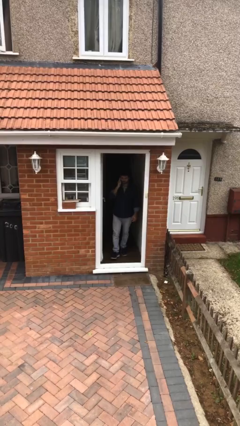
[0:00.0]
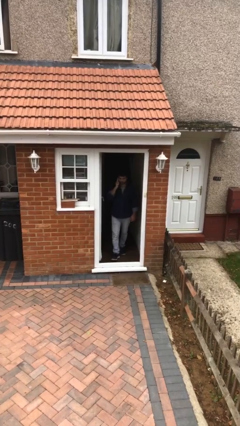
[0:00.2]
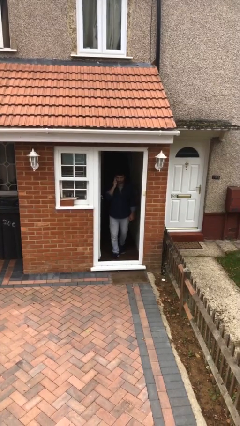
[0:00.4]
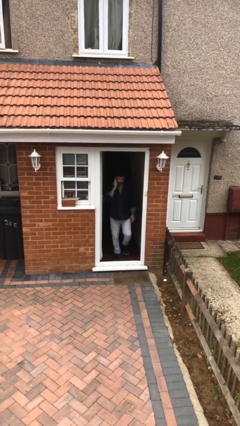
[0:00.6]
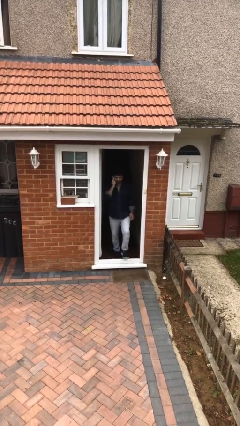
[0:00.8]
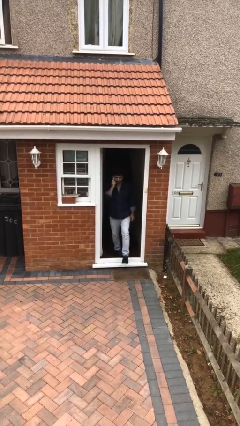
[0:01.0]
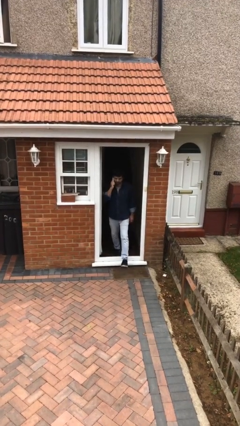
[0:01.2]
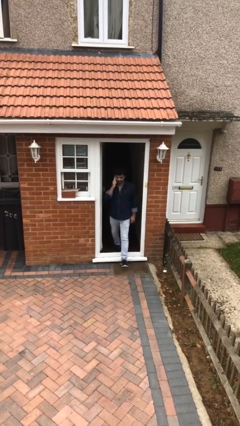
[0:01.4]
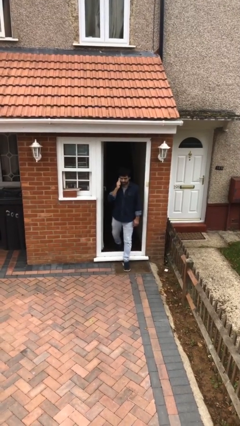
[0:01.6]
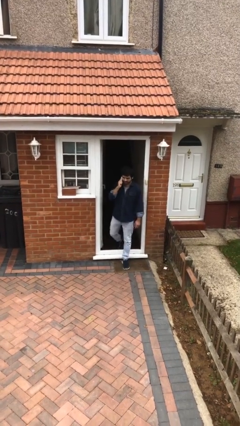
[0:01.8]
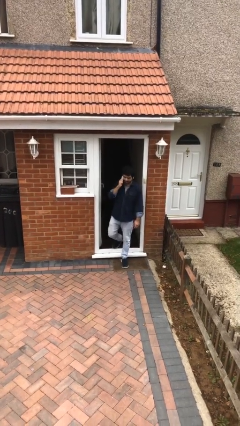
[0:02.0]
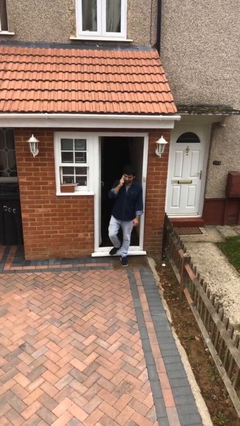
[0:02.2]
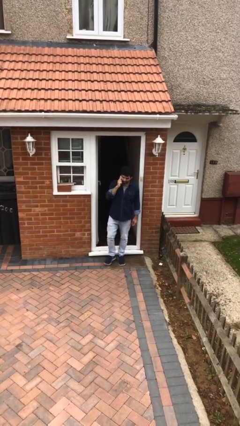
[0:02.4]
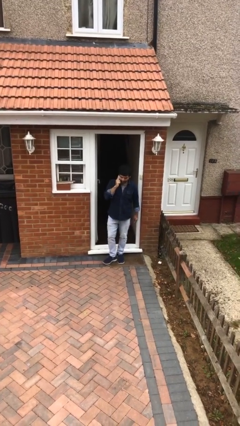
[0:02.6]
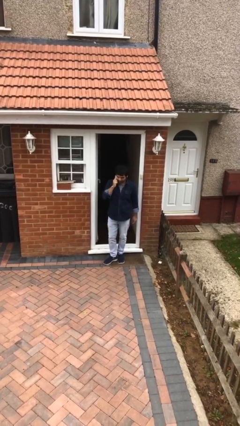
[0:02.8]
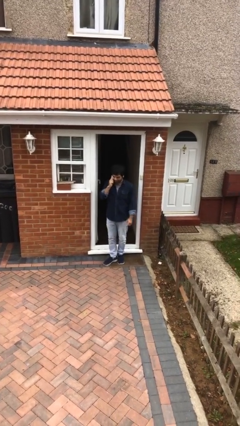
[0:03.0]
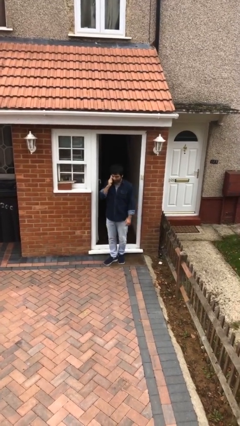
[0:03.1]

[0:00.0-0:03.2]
person enters scene through structure

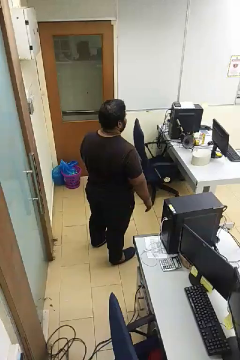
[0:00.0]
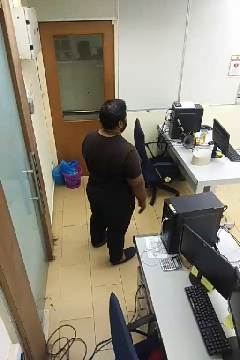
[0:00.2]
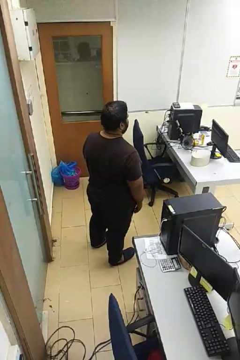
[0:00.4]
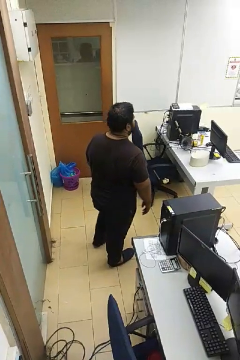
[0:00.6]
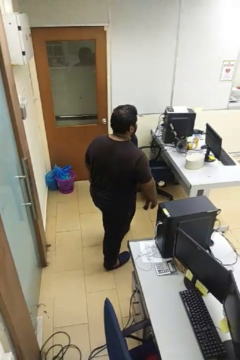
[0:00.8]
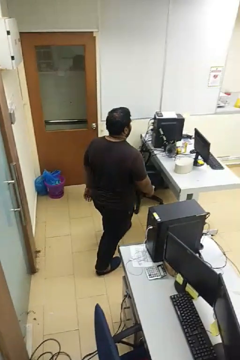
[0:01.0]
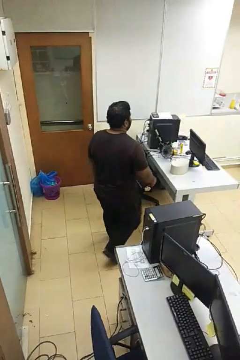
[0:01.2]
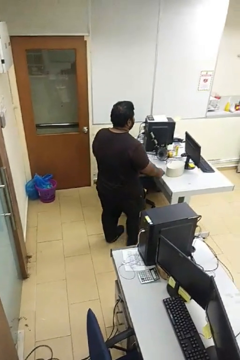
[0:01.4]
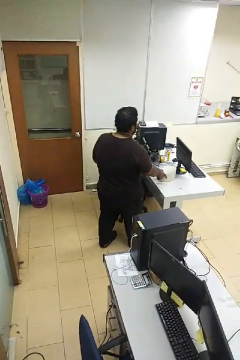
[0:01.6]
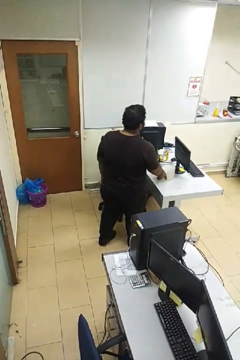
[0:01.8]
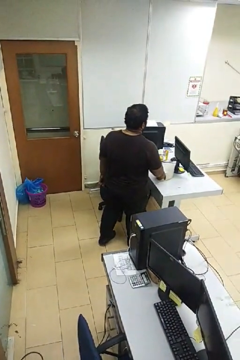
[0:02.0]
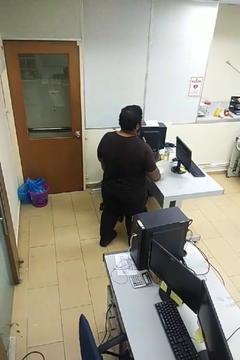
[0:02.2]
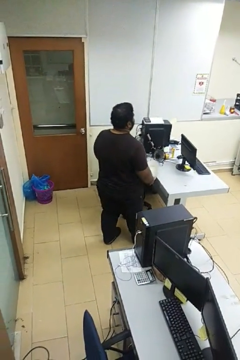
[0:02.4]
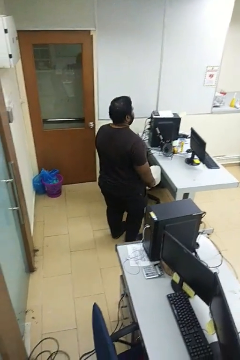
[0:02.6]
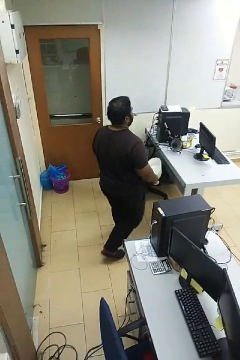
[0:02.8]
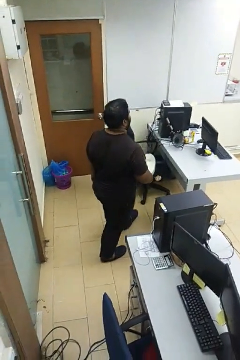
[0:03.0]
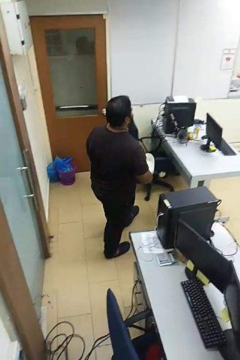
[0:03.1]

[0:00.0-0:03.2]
person picks up object from table

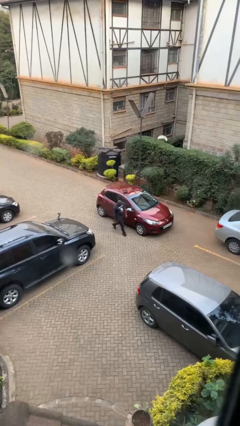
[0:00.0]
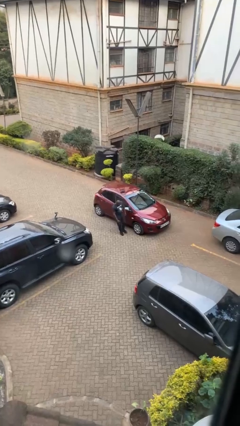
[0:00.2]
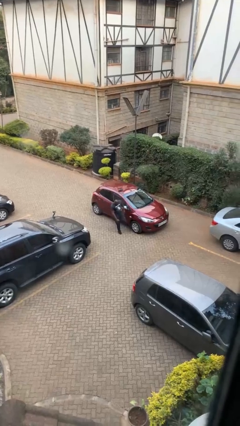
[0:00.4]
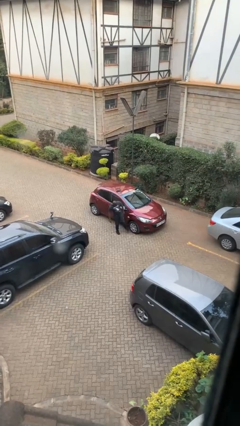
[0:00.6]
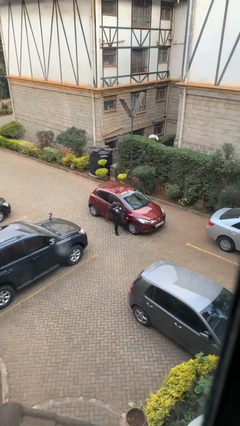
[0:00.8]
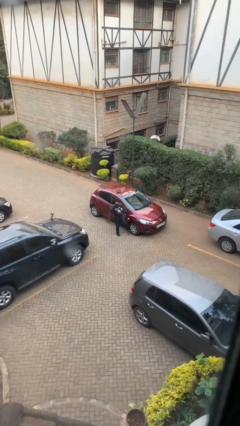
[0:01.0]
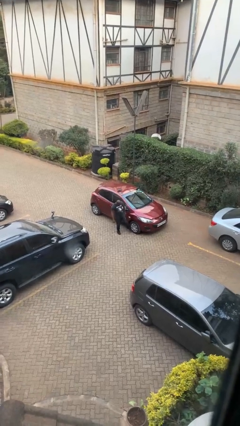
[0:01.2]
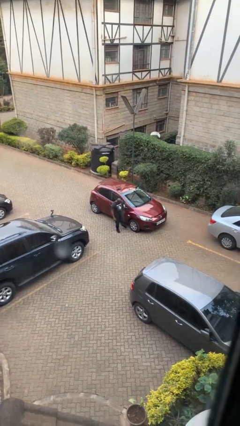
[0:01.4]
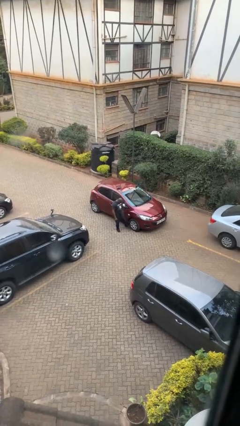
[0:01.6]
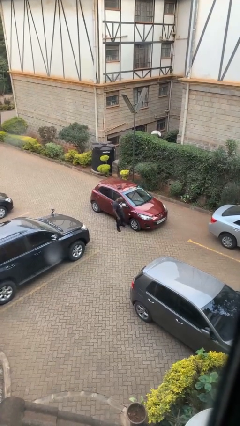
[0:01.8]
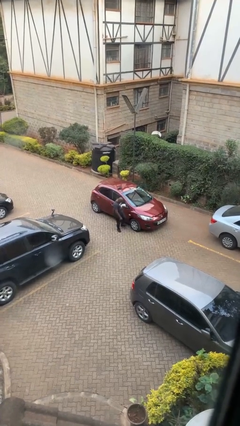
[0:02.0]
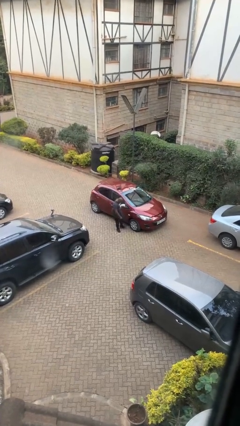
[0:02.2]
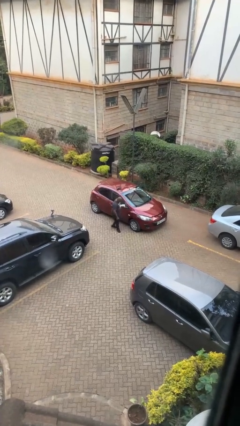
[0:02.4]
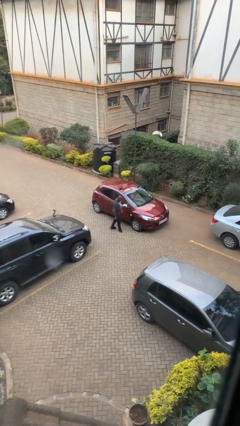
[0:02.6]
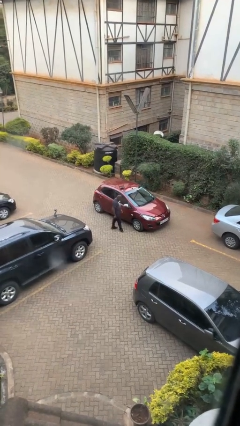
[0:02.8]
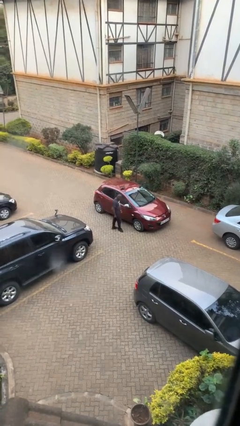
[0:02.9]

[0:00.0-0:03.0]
person kicks car tires

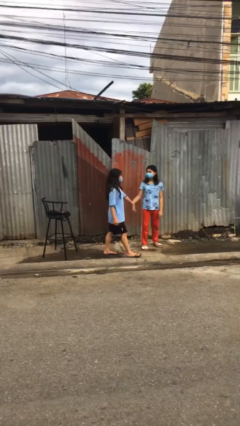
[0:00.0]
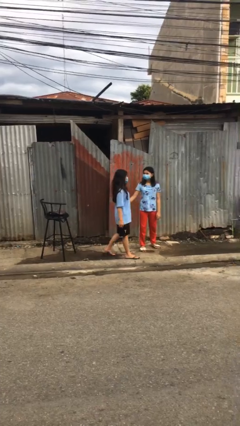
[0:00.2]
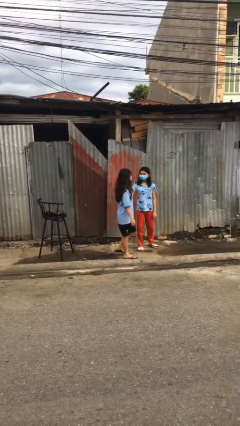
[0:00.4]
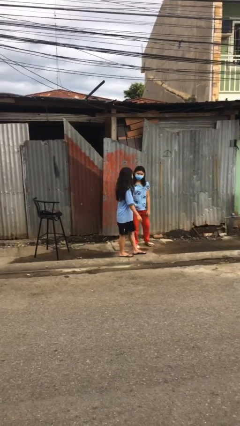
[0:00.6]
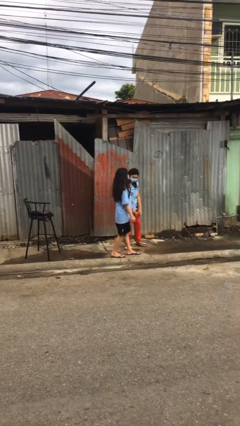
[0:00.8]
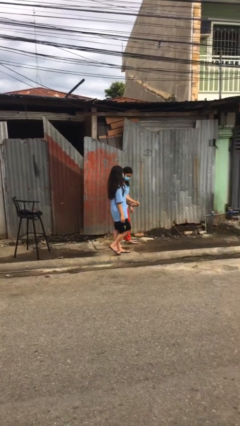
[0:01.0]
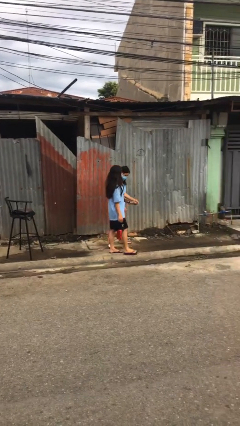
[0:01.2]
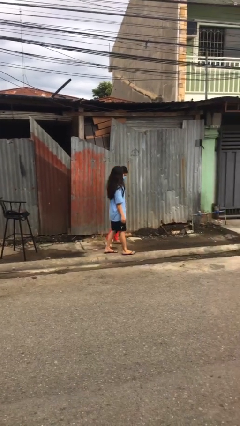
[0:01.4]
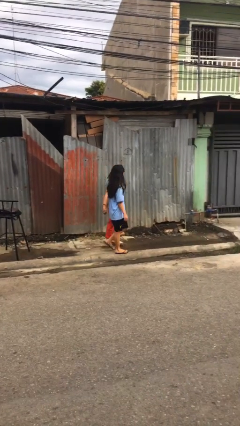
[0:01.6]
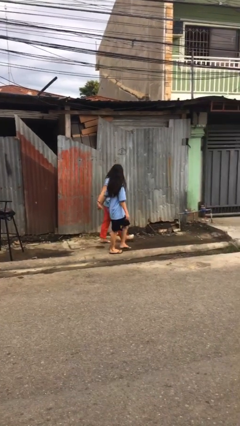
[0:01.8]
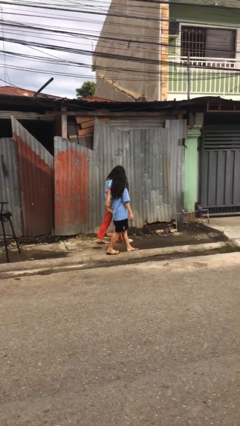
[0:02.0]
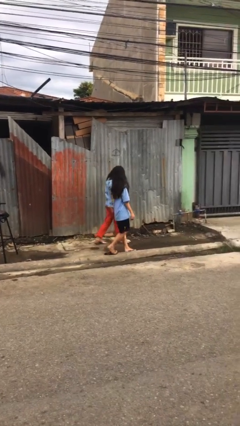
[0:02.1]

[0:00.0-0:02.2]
person holds hand

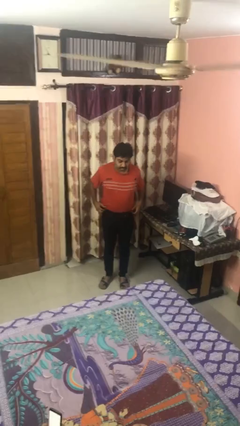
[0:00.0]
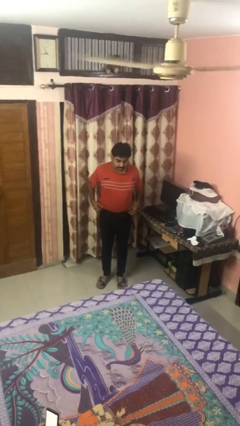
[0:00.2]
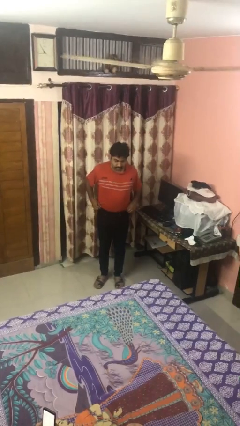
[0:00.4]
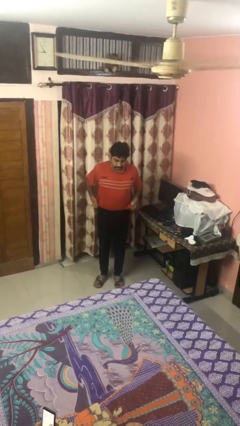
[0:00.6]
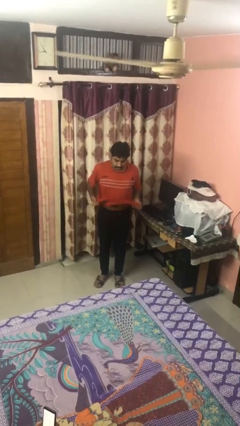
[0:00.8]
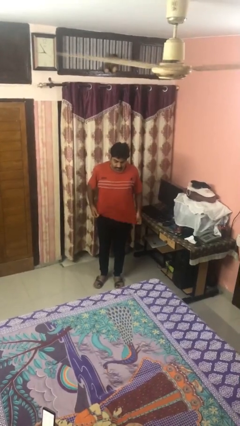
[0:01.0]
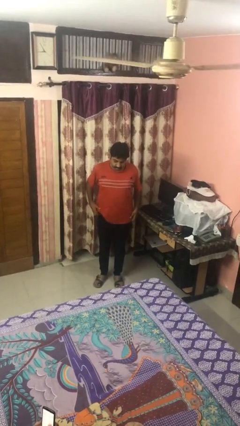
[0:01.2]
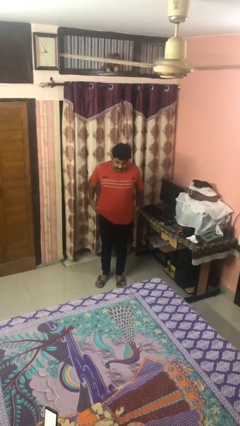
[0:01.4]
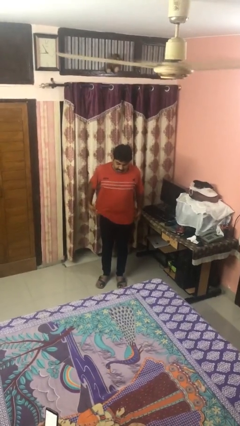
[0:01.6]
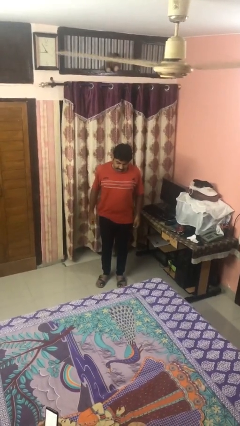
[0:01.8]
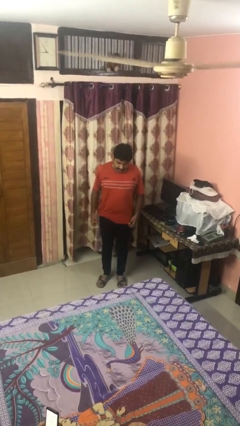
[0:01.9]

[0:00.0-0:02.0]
person untucks shirt

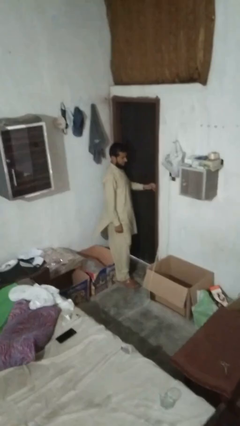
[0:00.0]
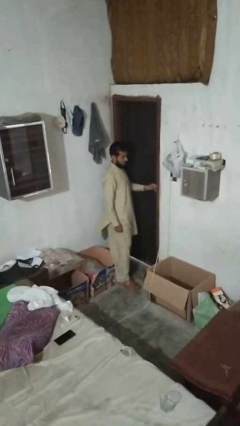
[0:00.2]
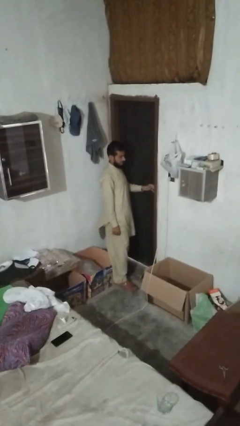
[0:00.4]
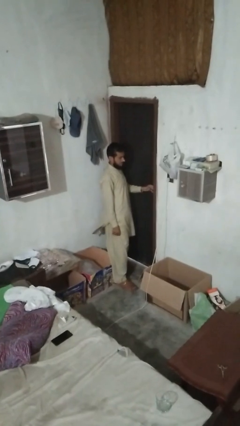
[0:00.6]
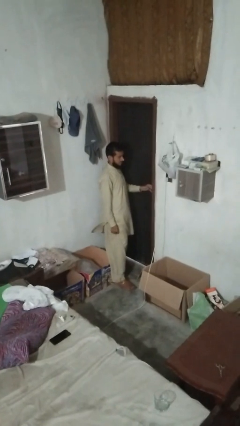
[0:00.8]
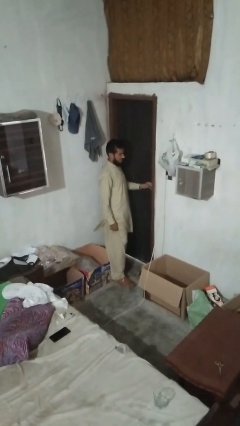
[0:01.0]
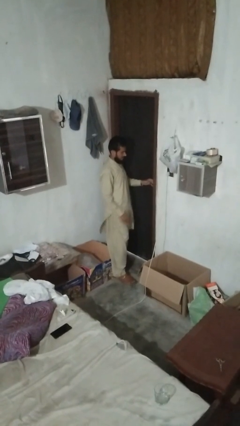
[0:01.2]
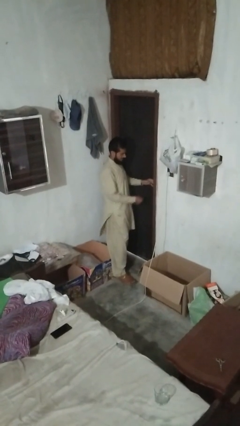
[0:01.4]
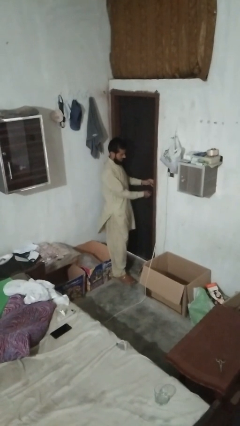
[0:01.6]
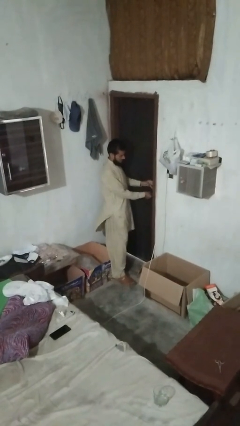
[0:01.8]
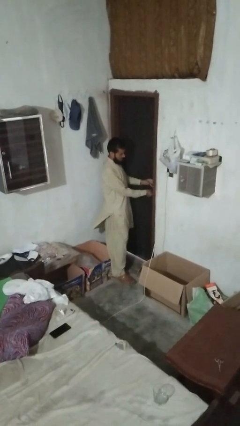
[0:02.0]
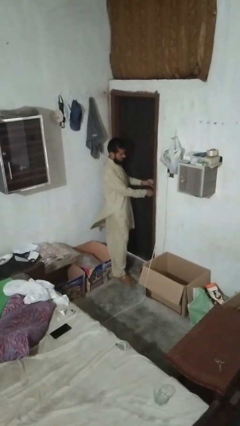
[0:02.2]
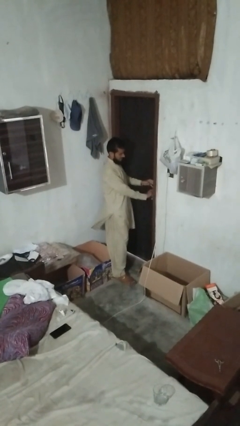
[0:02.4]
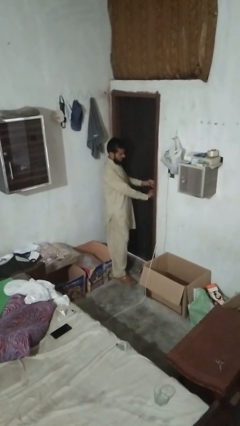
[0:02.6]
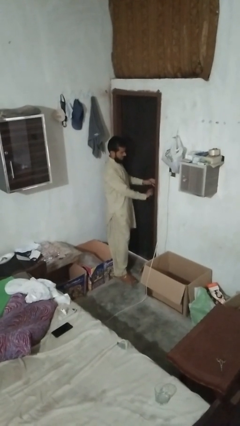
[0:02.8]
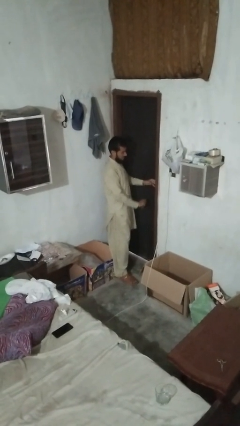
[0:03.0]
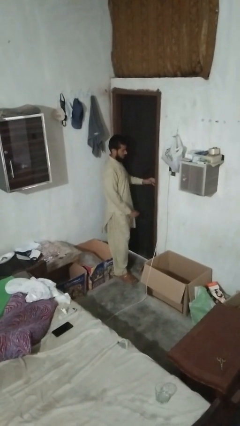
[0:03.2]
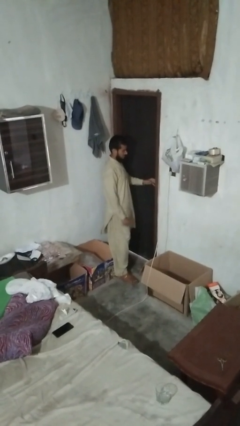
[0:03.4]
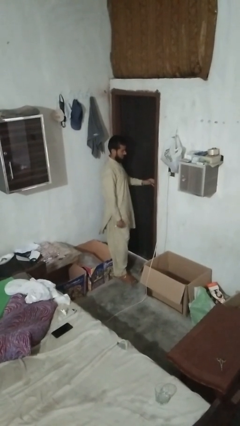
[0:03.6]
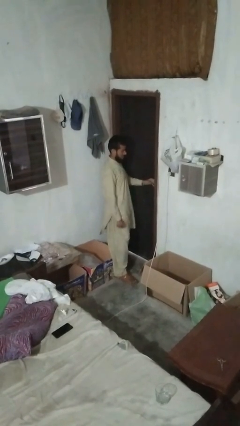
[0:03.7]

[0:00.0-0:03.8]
person unlocks door with keys

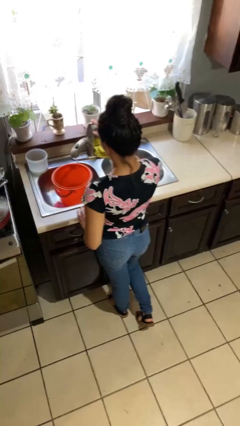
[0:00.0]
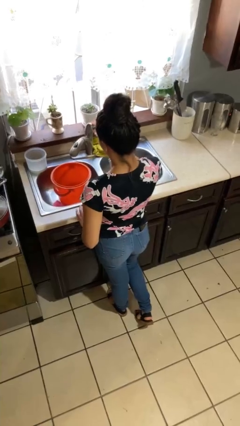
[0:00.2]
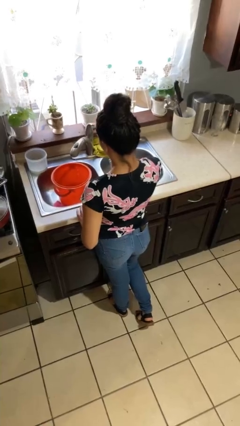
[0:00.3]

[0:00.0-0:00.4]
person turns off faucet
